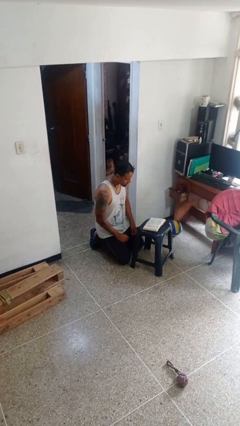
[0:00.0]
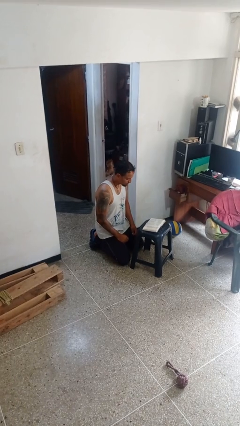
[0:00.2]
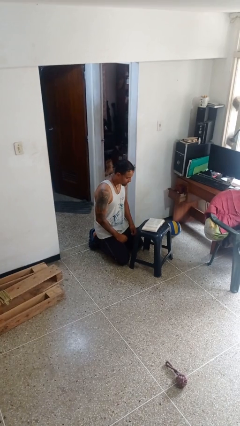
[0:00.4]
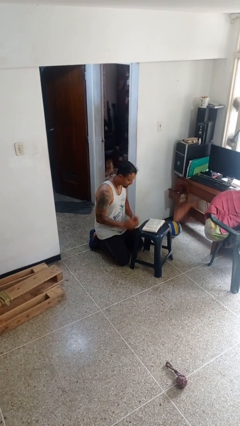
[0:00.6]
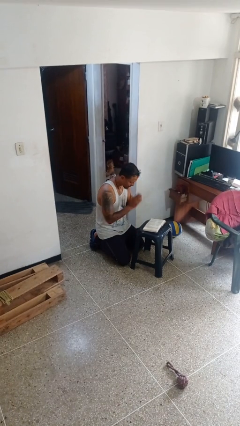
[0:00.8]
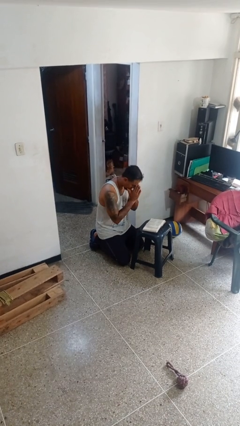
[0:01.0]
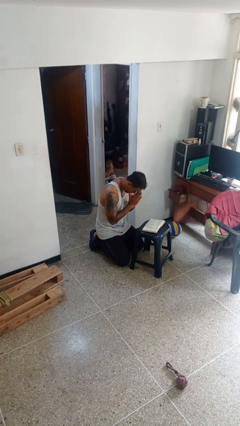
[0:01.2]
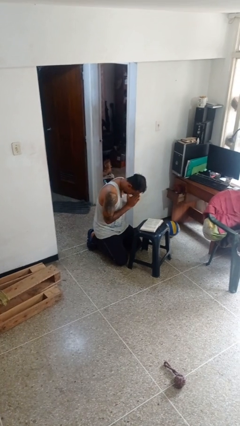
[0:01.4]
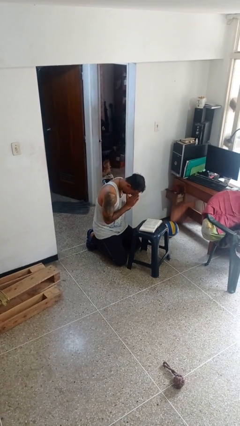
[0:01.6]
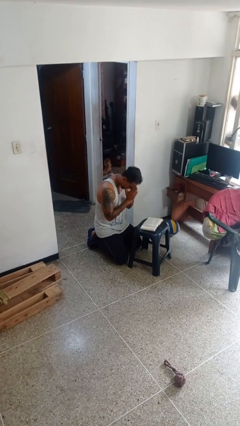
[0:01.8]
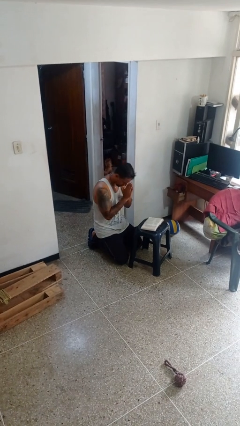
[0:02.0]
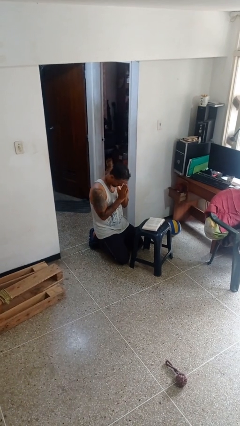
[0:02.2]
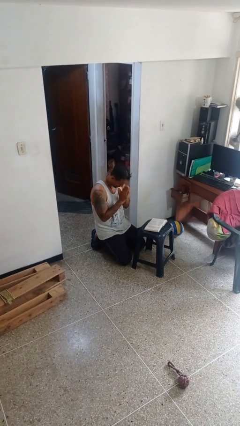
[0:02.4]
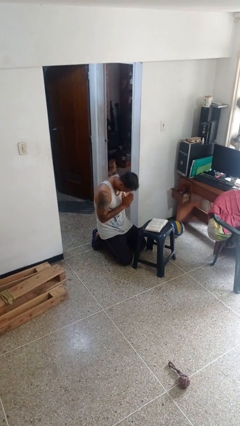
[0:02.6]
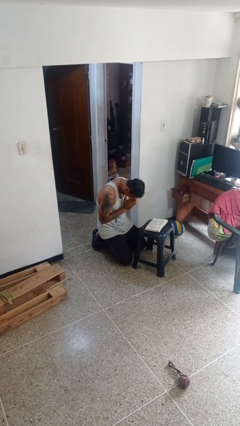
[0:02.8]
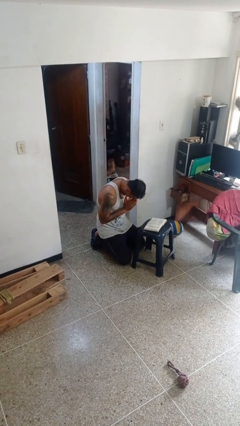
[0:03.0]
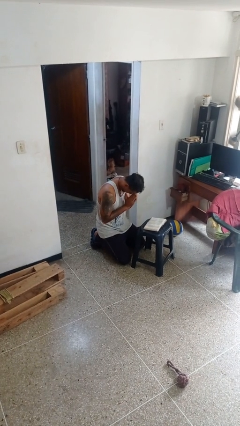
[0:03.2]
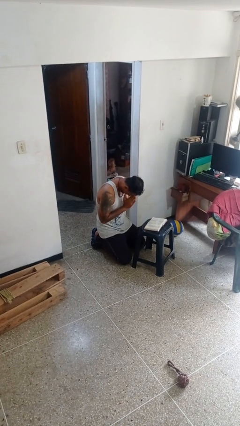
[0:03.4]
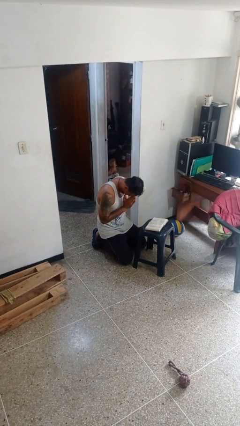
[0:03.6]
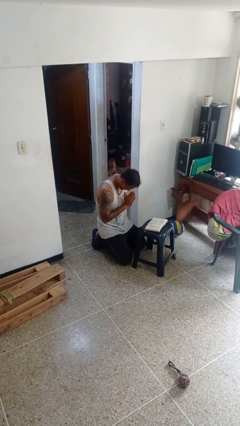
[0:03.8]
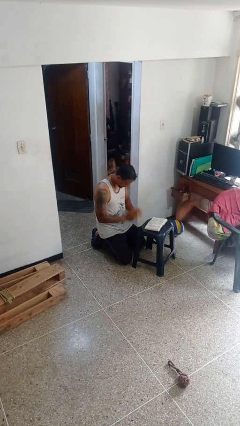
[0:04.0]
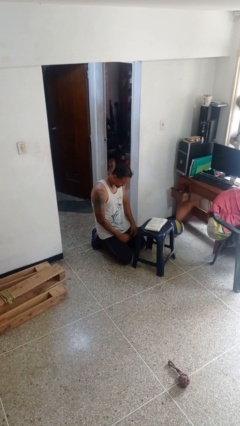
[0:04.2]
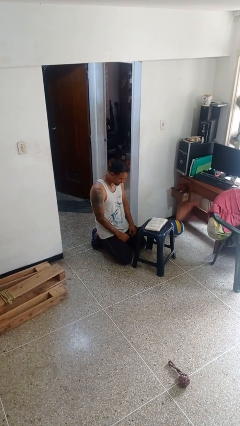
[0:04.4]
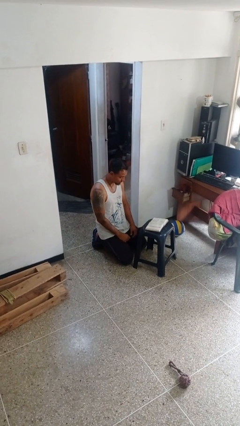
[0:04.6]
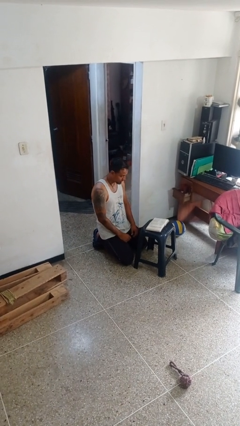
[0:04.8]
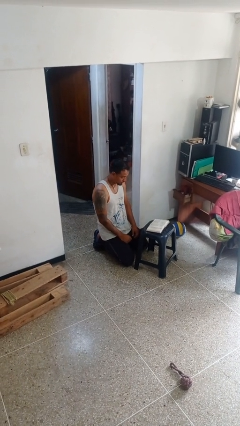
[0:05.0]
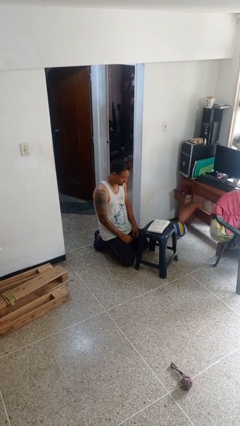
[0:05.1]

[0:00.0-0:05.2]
person prays

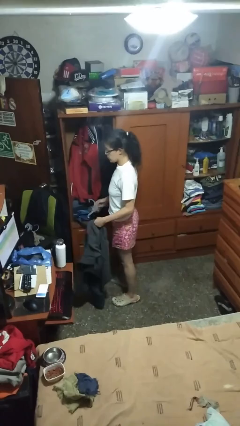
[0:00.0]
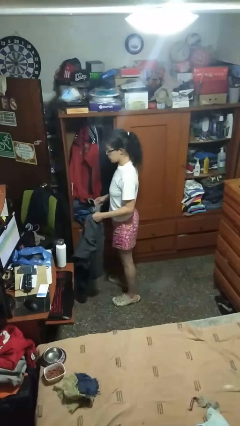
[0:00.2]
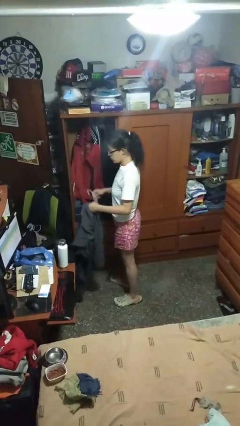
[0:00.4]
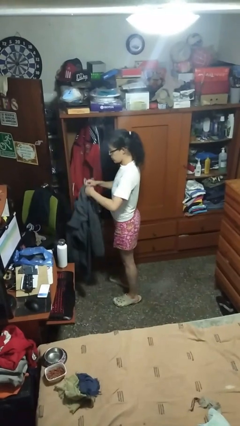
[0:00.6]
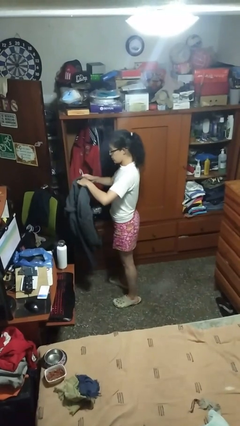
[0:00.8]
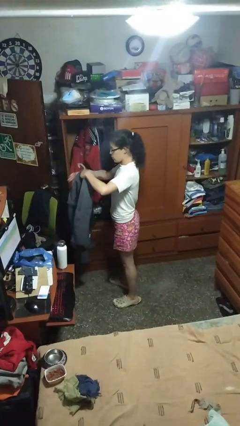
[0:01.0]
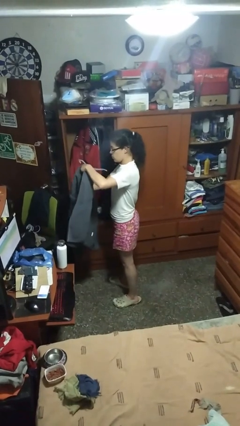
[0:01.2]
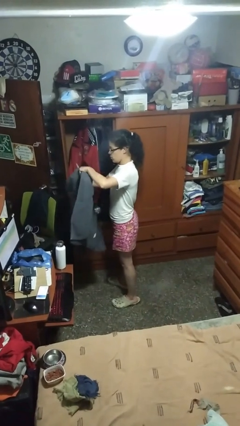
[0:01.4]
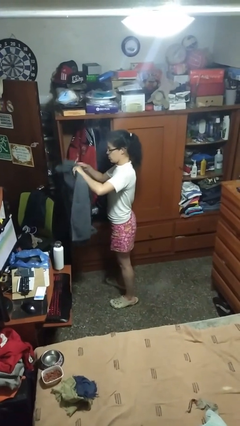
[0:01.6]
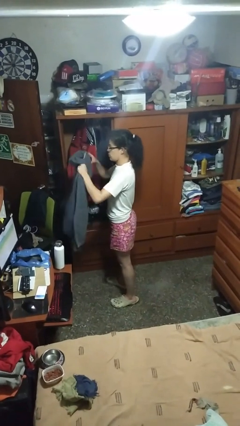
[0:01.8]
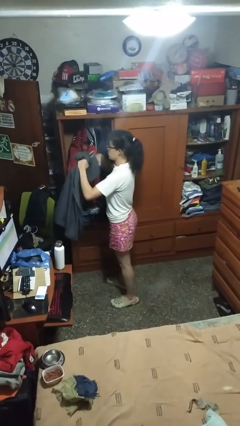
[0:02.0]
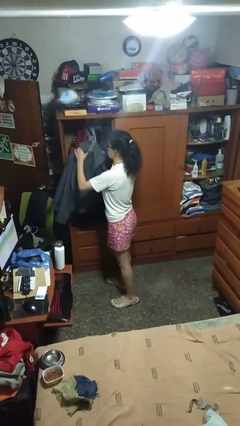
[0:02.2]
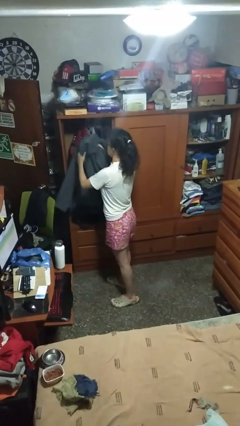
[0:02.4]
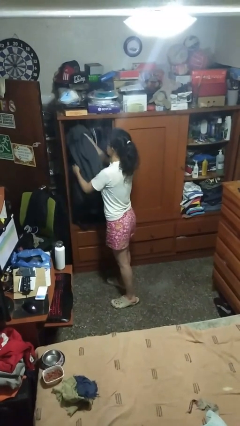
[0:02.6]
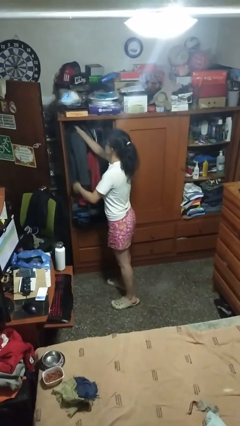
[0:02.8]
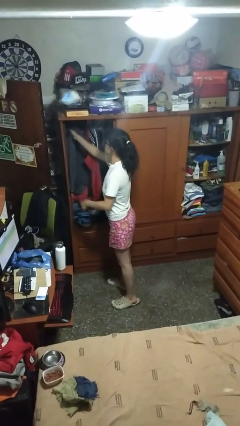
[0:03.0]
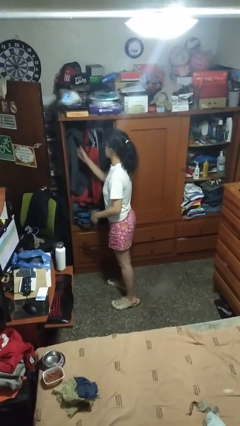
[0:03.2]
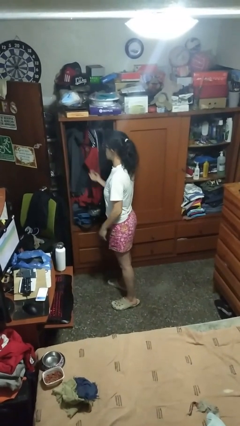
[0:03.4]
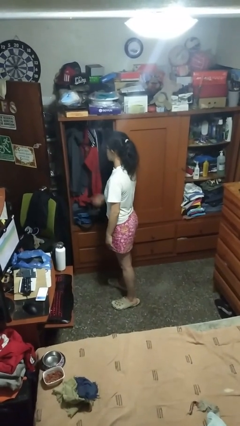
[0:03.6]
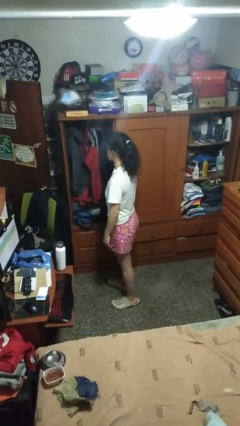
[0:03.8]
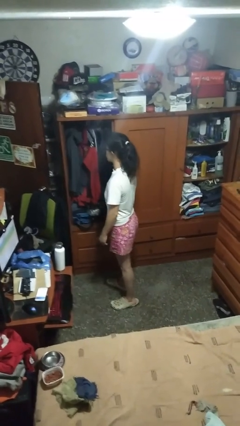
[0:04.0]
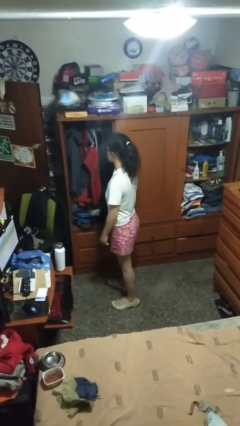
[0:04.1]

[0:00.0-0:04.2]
person puts clothes into closet

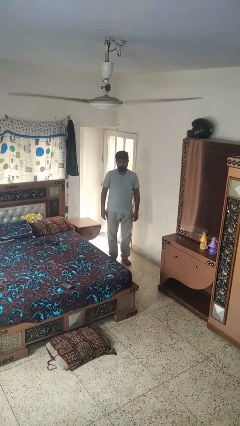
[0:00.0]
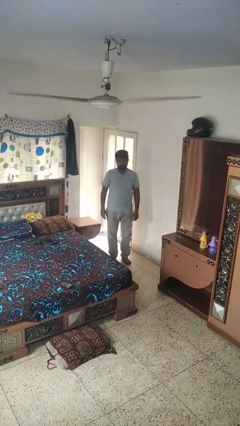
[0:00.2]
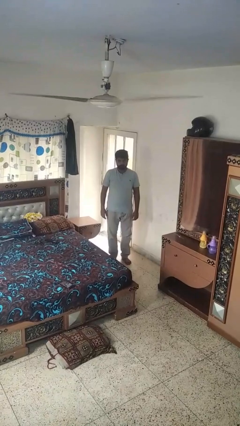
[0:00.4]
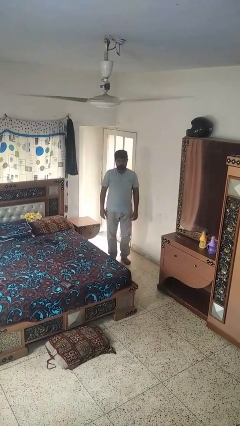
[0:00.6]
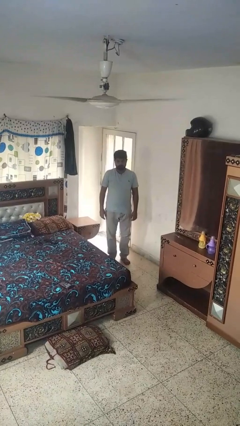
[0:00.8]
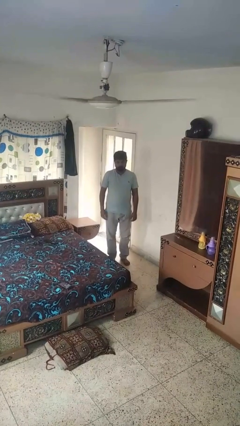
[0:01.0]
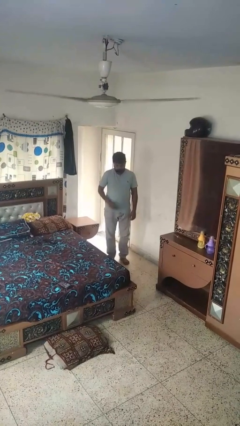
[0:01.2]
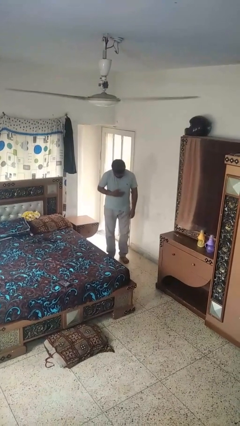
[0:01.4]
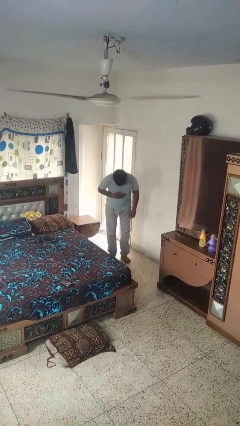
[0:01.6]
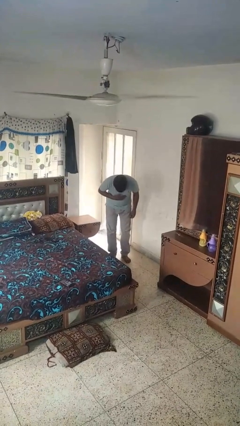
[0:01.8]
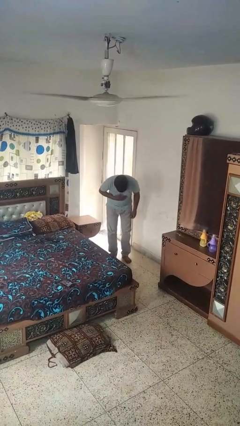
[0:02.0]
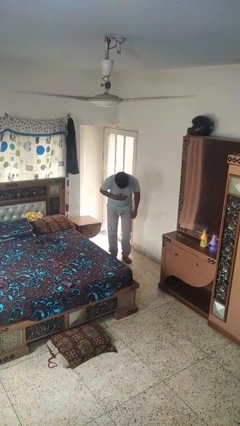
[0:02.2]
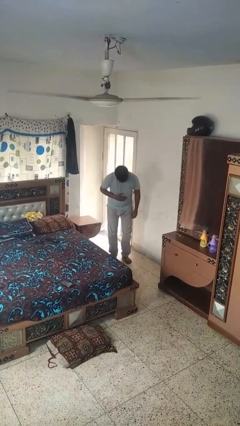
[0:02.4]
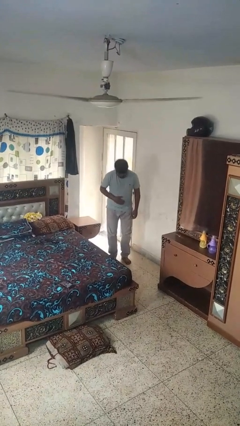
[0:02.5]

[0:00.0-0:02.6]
person bows

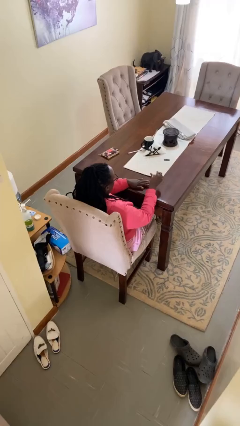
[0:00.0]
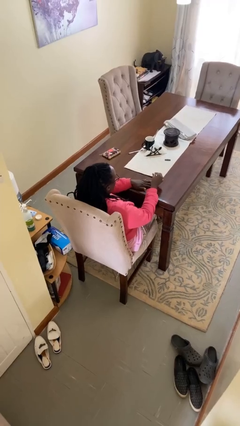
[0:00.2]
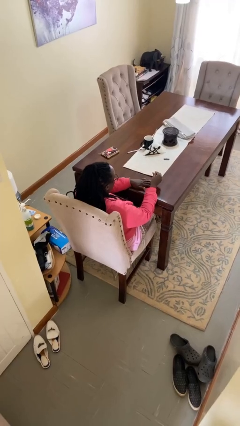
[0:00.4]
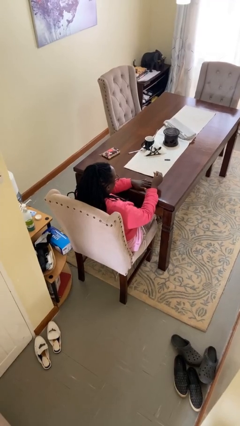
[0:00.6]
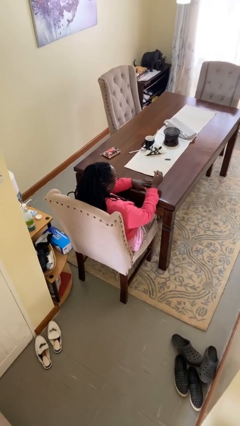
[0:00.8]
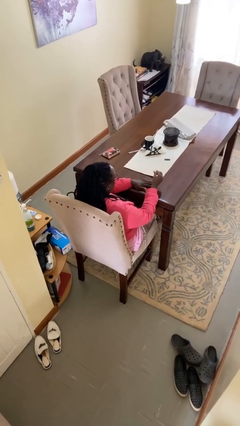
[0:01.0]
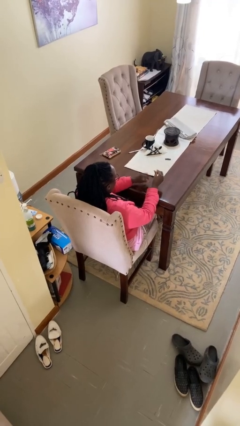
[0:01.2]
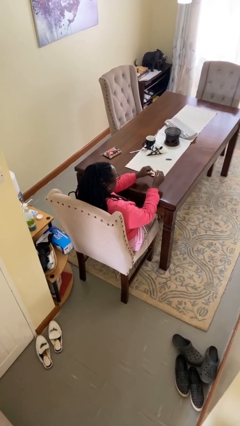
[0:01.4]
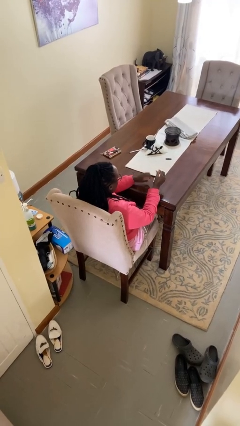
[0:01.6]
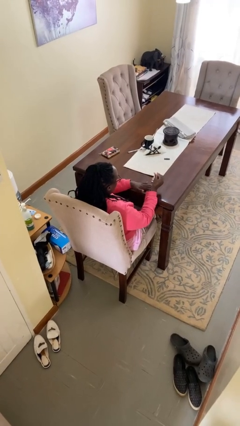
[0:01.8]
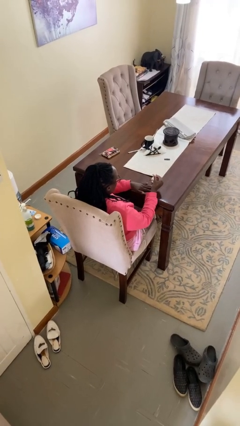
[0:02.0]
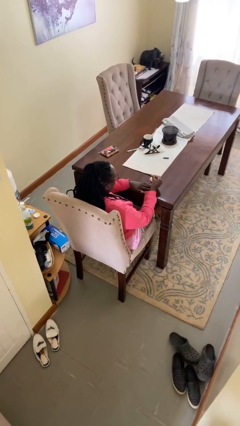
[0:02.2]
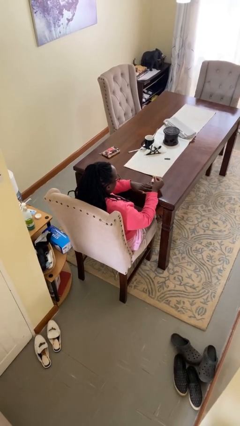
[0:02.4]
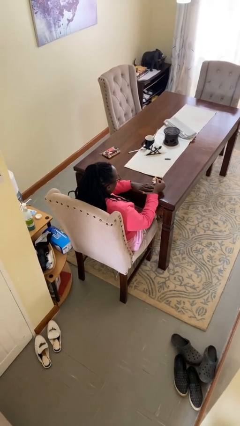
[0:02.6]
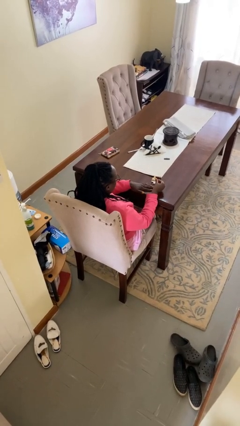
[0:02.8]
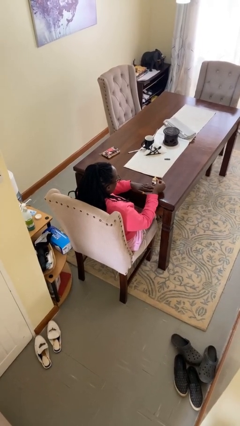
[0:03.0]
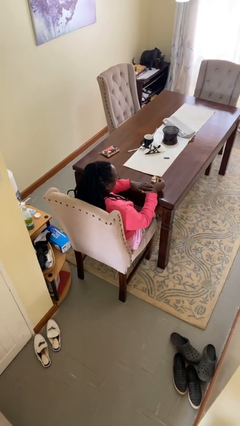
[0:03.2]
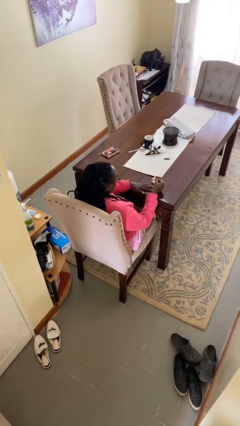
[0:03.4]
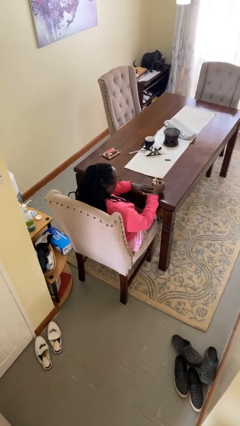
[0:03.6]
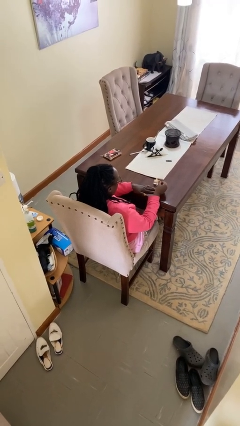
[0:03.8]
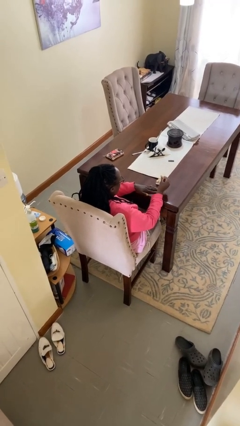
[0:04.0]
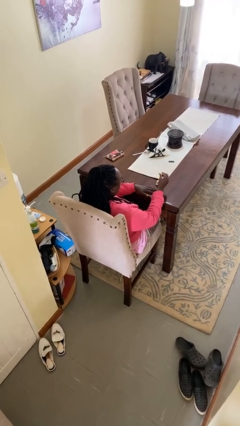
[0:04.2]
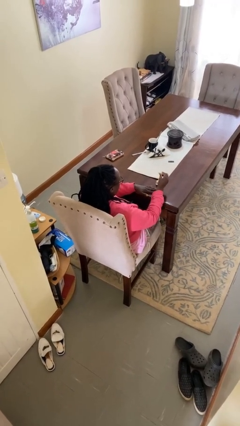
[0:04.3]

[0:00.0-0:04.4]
person paints fingernails

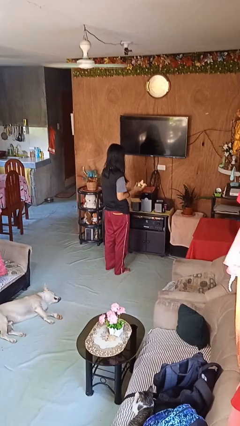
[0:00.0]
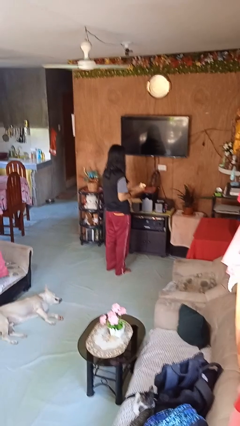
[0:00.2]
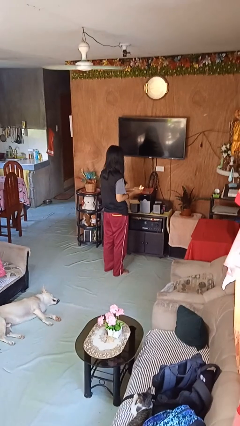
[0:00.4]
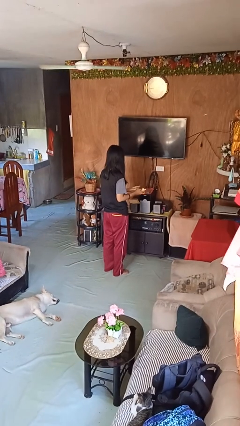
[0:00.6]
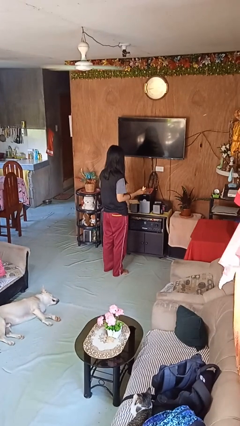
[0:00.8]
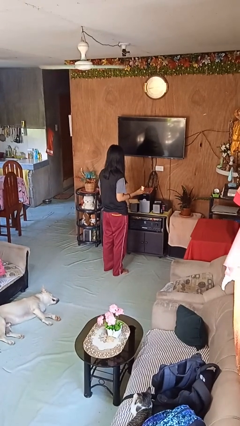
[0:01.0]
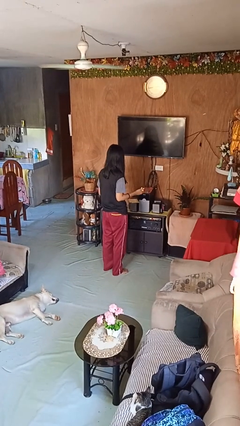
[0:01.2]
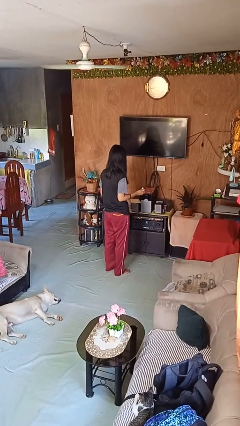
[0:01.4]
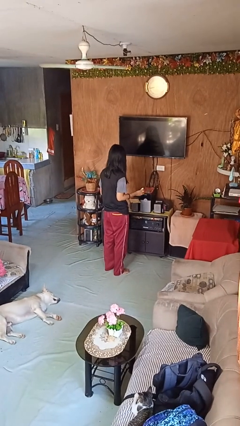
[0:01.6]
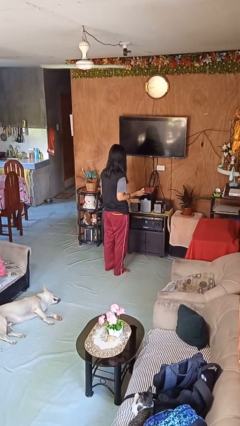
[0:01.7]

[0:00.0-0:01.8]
person crumples paper
